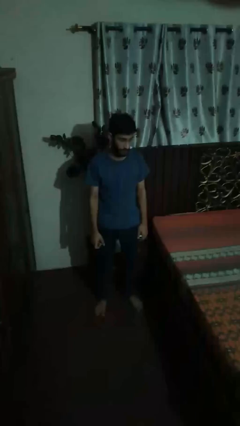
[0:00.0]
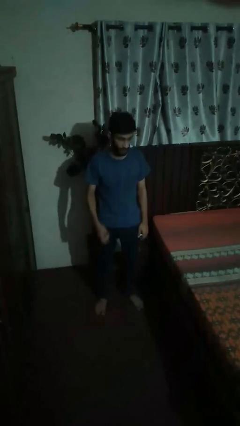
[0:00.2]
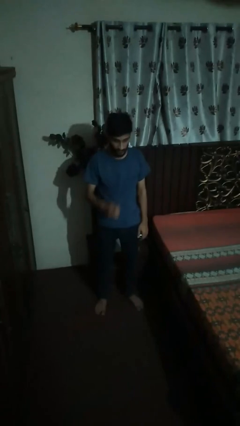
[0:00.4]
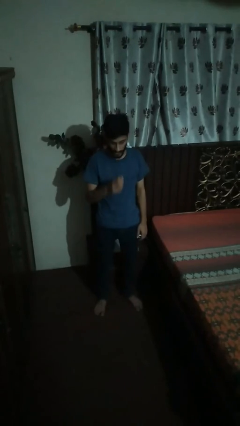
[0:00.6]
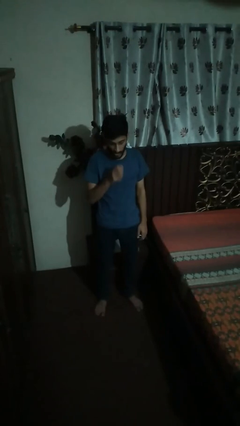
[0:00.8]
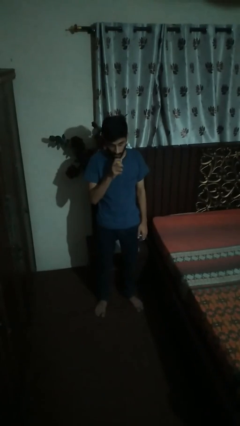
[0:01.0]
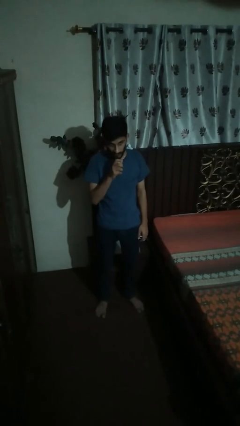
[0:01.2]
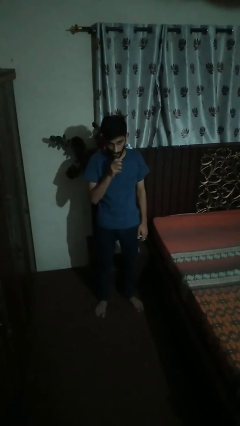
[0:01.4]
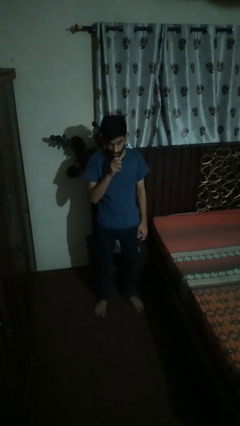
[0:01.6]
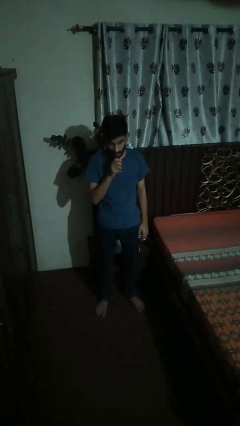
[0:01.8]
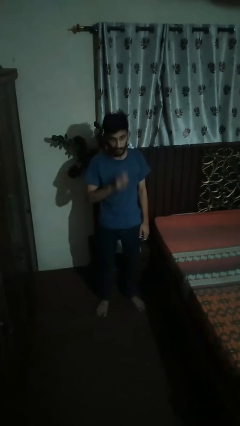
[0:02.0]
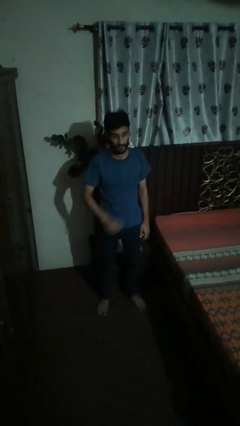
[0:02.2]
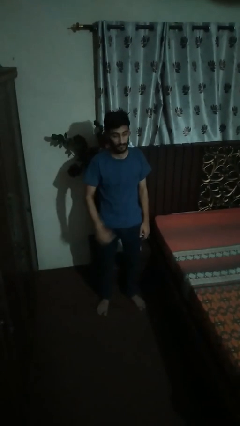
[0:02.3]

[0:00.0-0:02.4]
person eats banana

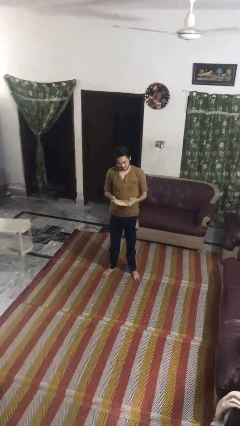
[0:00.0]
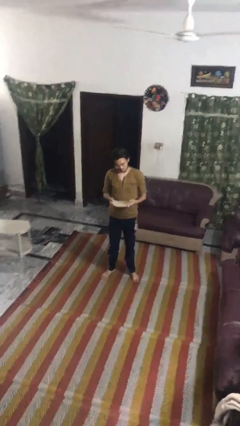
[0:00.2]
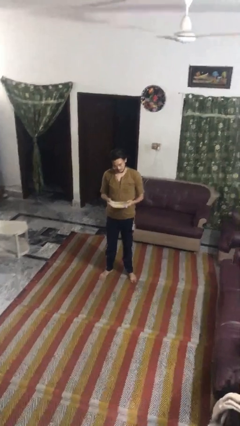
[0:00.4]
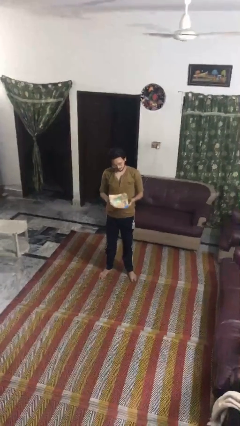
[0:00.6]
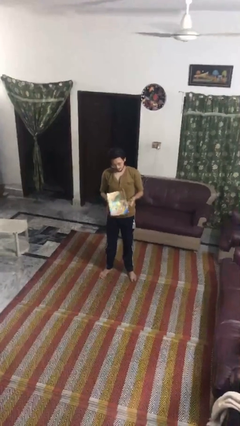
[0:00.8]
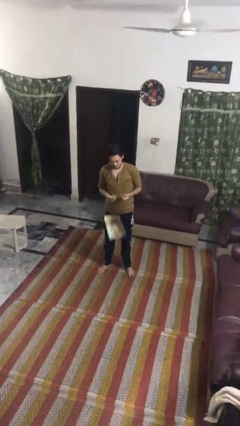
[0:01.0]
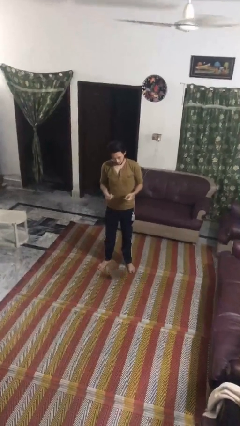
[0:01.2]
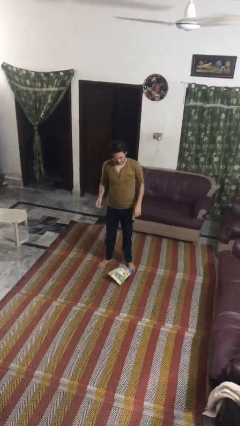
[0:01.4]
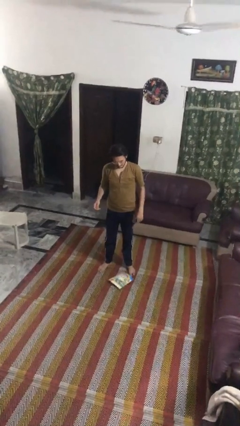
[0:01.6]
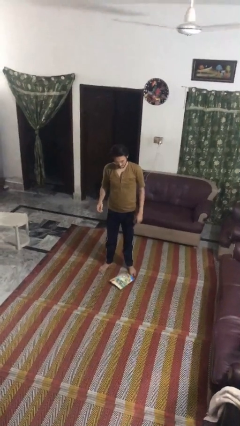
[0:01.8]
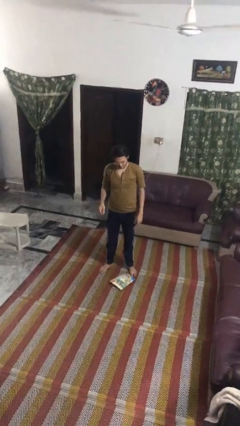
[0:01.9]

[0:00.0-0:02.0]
person drops object

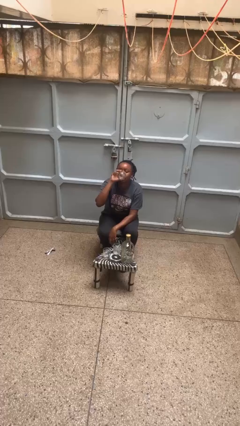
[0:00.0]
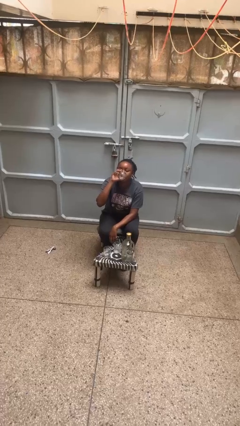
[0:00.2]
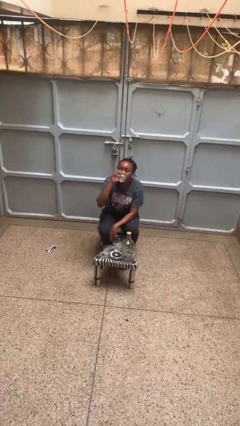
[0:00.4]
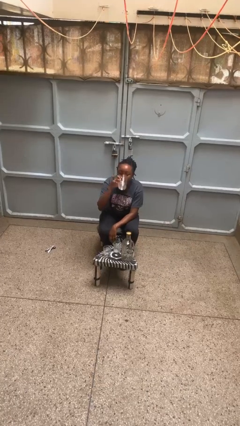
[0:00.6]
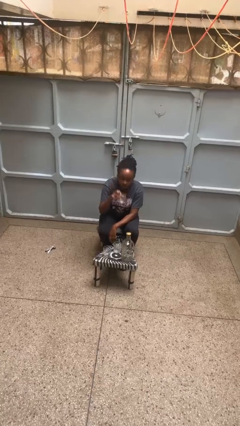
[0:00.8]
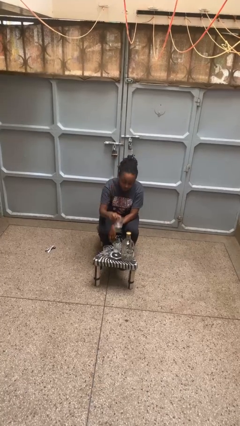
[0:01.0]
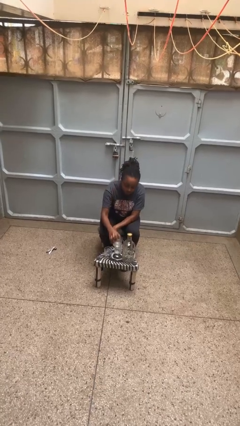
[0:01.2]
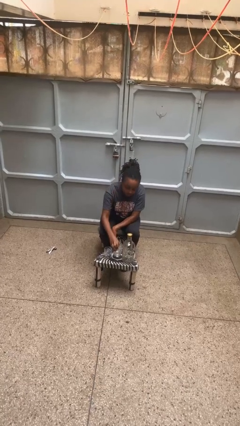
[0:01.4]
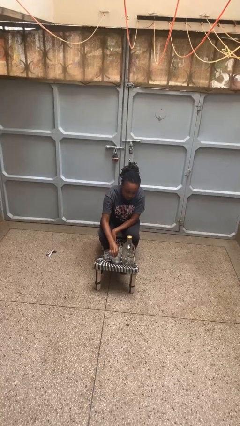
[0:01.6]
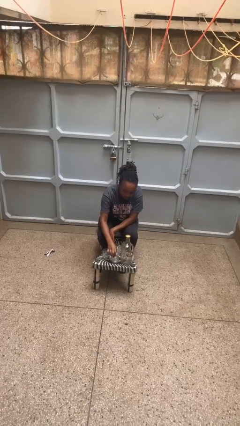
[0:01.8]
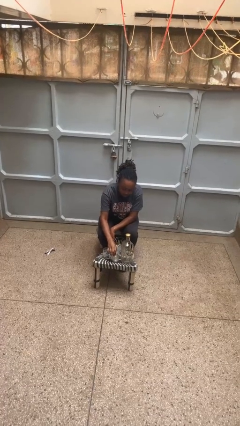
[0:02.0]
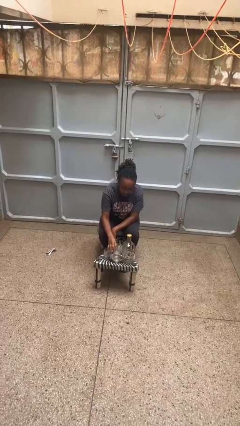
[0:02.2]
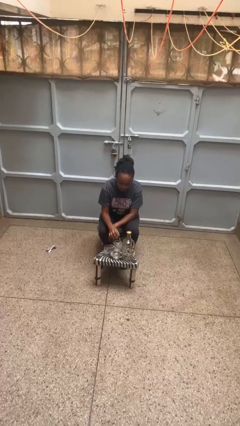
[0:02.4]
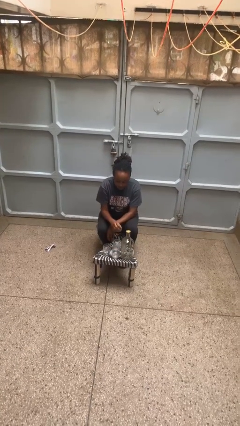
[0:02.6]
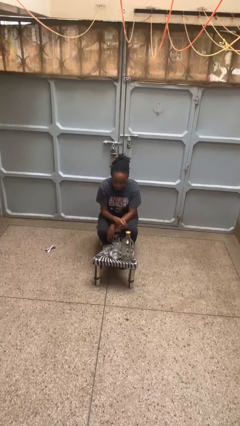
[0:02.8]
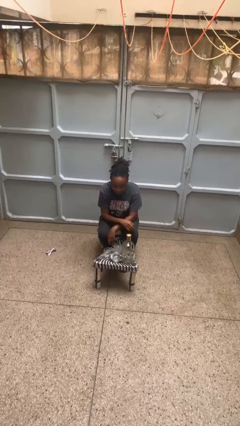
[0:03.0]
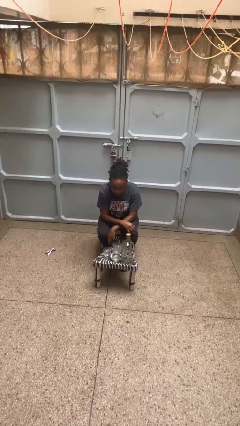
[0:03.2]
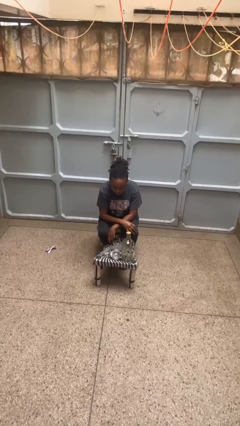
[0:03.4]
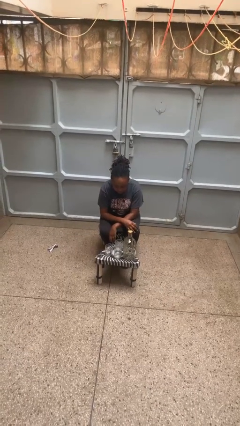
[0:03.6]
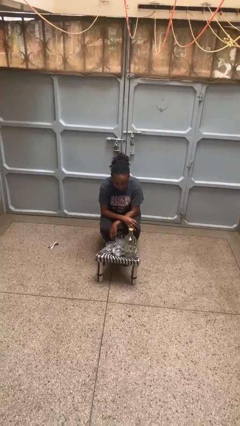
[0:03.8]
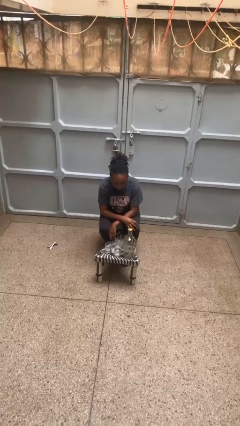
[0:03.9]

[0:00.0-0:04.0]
person puts down object on table

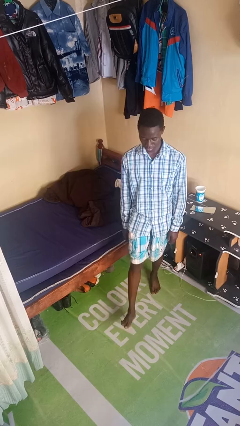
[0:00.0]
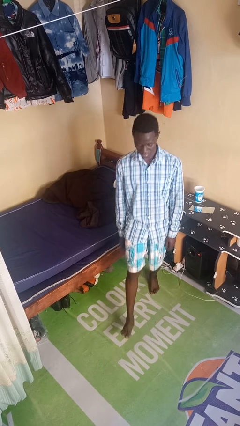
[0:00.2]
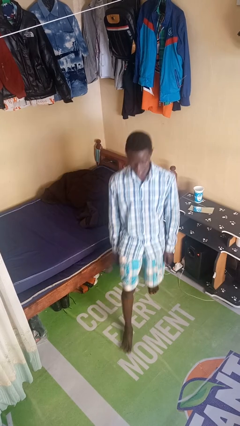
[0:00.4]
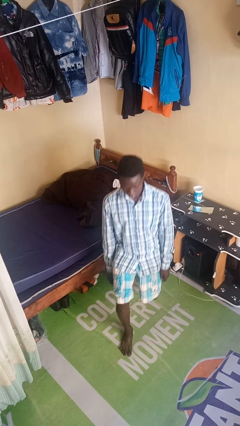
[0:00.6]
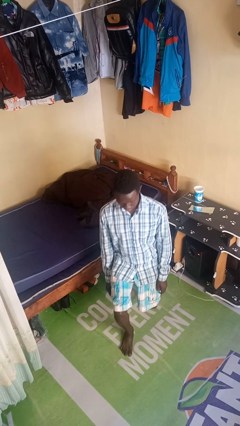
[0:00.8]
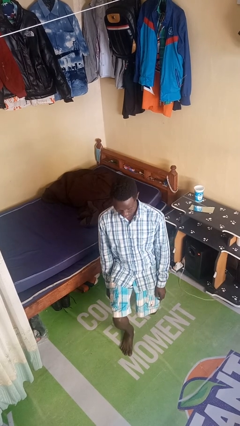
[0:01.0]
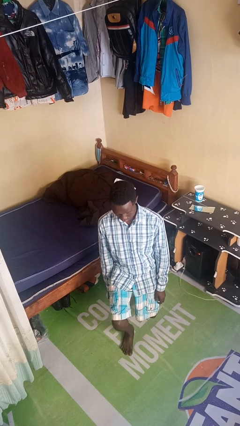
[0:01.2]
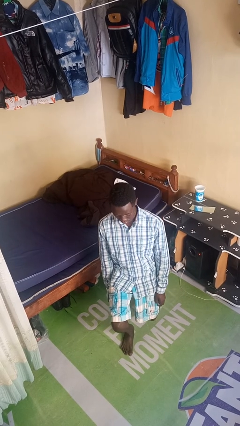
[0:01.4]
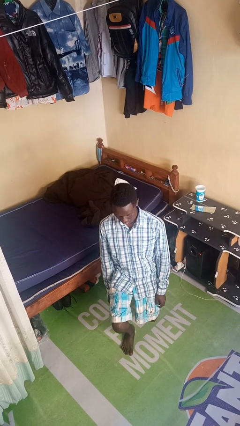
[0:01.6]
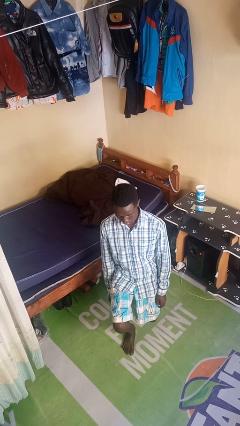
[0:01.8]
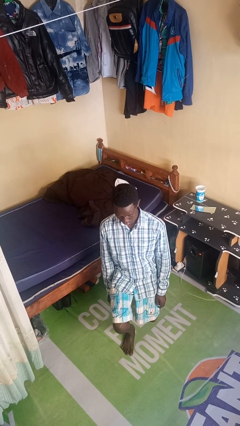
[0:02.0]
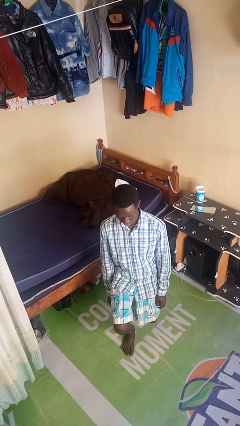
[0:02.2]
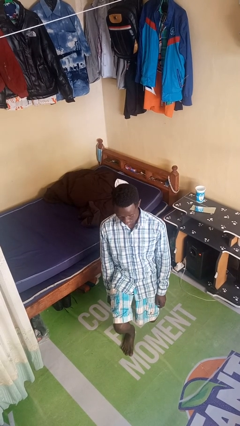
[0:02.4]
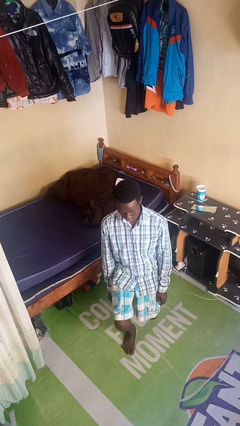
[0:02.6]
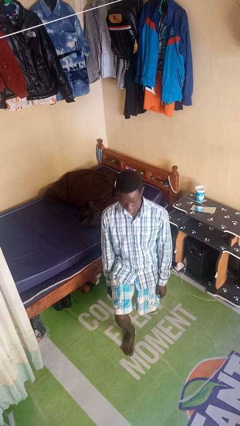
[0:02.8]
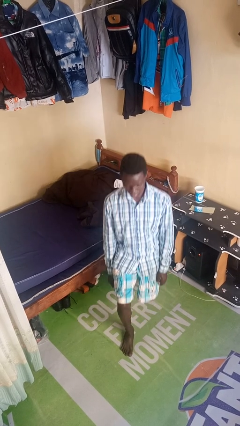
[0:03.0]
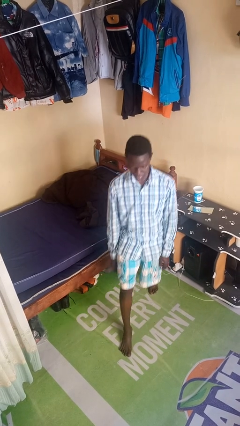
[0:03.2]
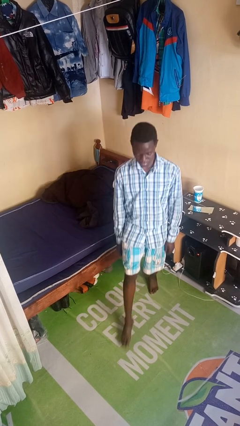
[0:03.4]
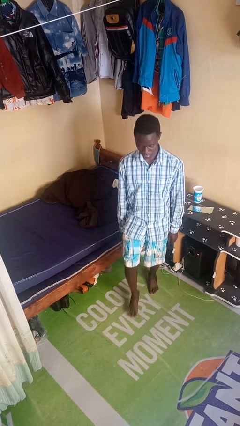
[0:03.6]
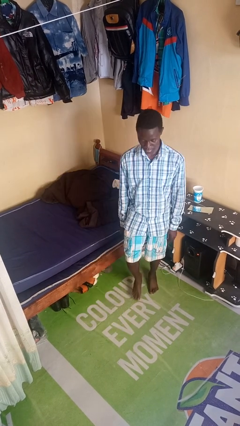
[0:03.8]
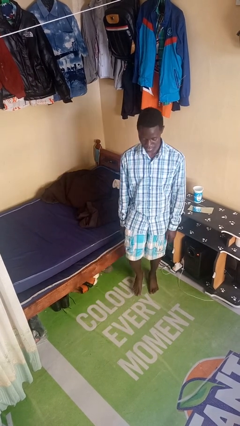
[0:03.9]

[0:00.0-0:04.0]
person exercises with lunges

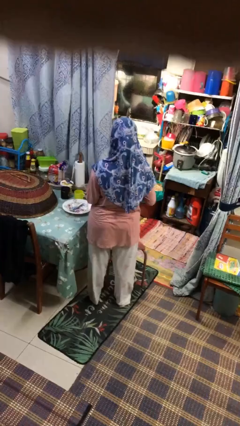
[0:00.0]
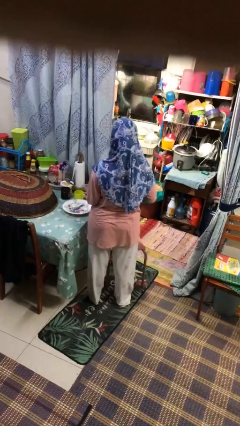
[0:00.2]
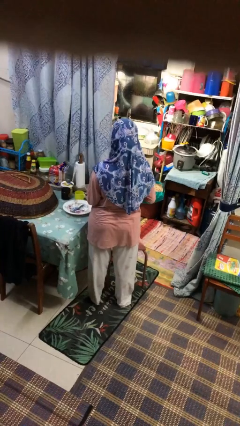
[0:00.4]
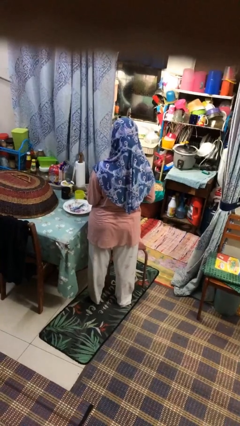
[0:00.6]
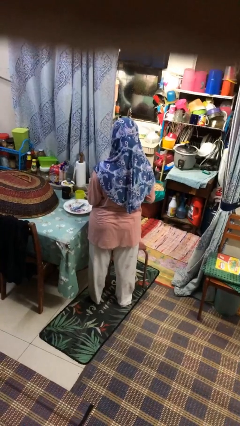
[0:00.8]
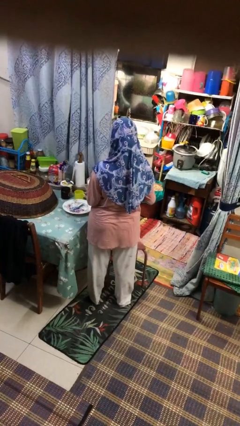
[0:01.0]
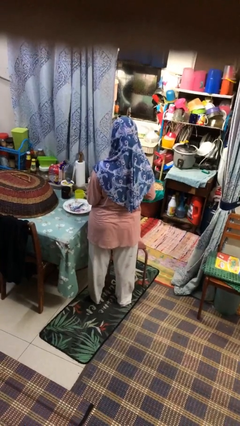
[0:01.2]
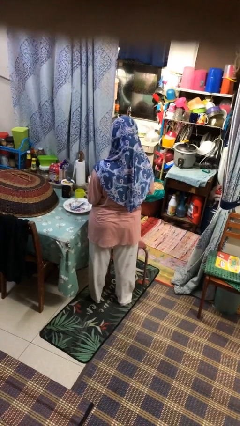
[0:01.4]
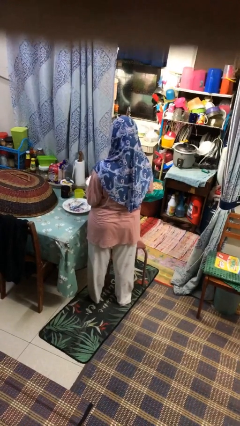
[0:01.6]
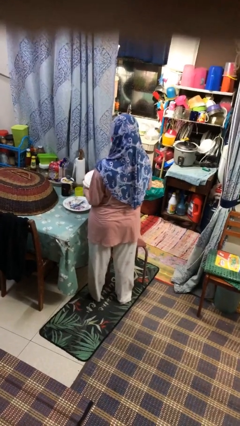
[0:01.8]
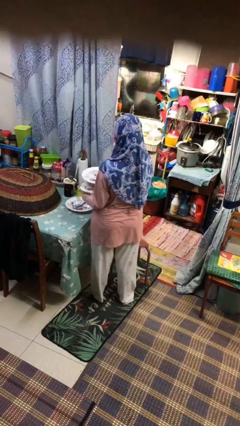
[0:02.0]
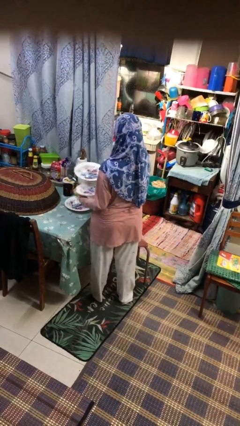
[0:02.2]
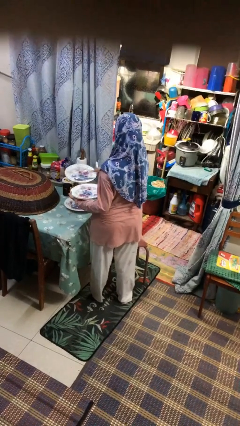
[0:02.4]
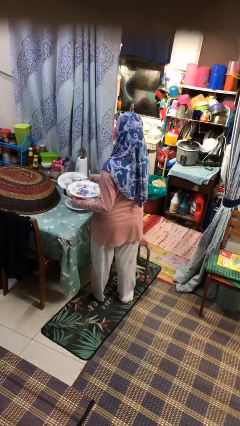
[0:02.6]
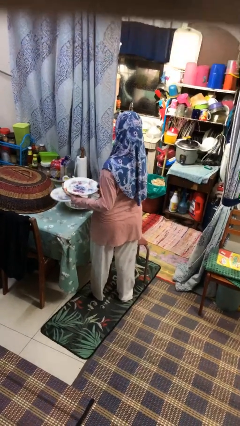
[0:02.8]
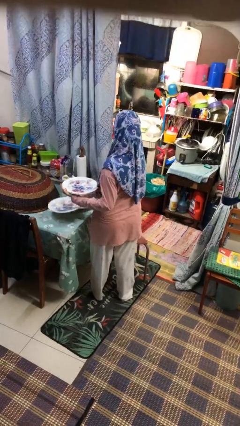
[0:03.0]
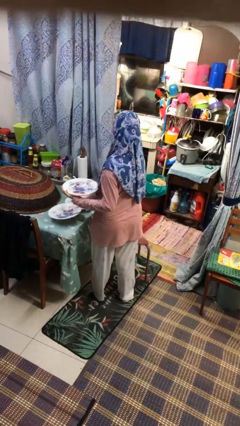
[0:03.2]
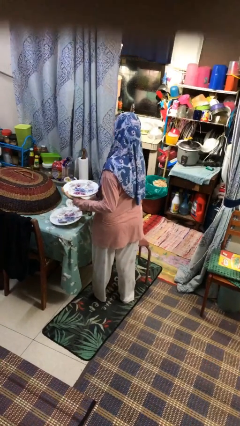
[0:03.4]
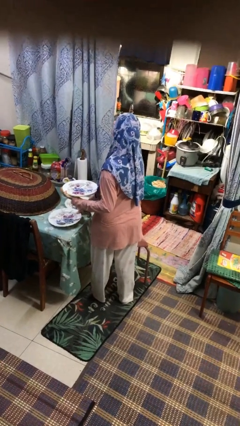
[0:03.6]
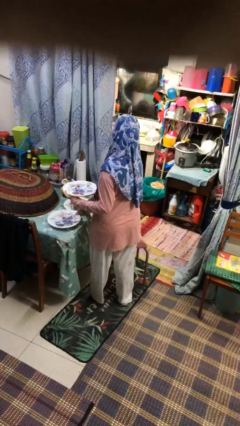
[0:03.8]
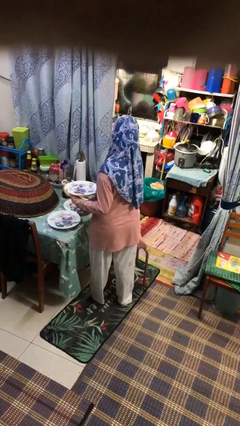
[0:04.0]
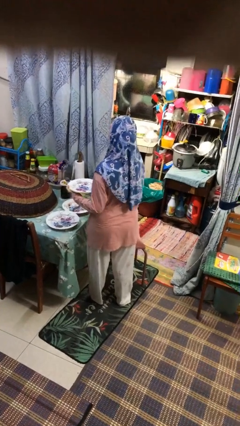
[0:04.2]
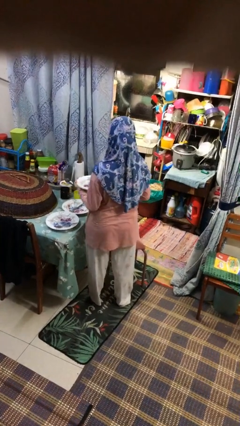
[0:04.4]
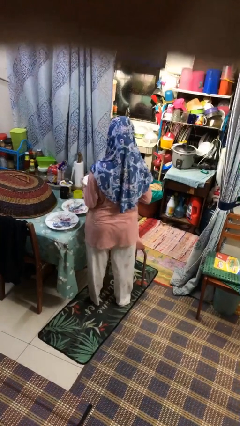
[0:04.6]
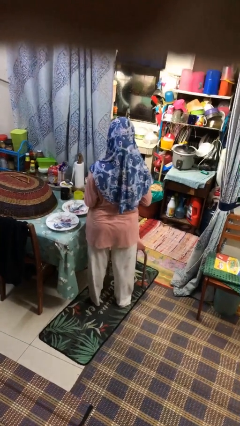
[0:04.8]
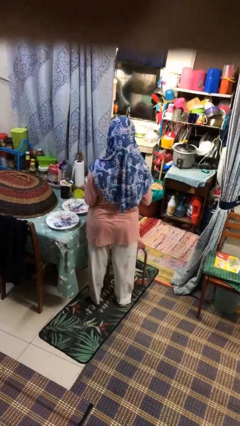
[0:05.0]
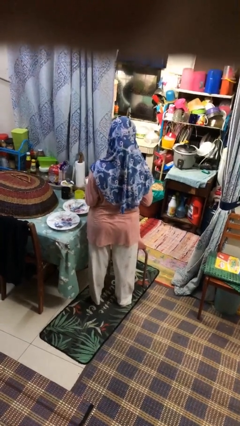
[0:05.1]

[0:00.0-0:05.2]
person sets table

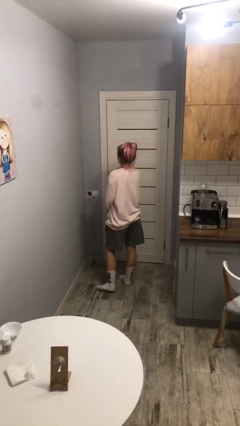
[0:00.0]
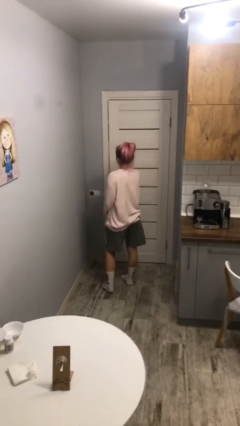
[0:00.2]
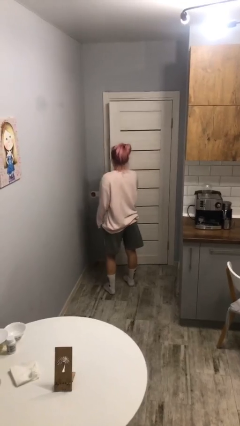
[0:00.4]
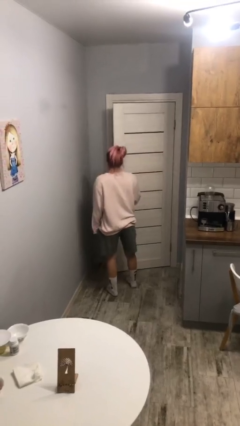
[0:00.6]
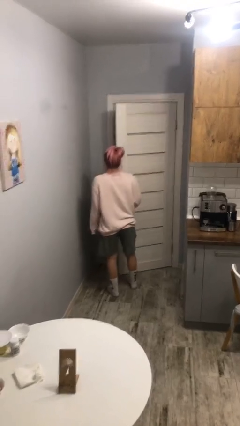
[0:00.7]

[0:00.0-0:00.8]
person opens facility door
